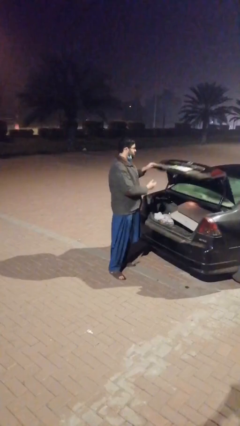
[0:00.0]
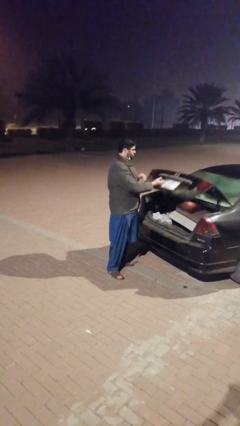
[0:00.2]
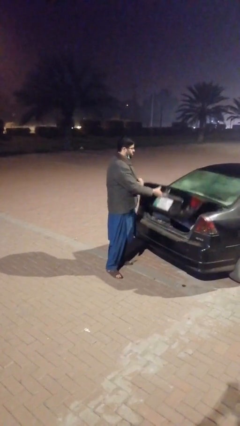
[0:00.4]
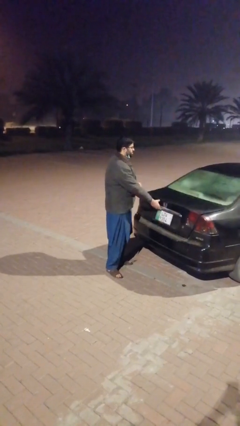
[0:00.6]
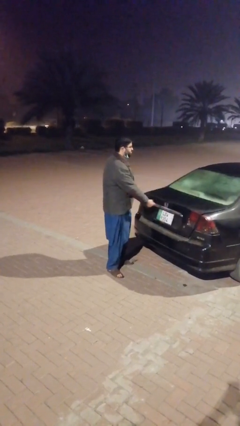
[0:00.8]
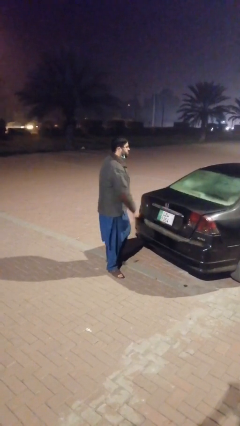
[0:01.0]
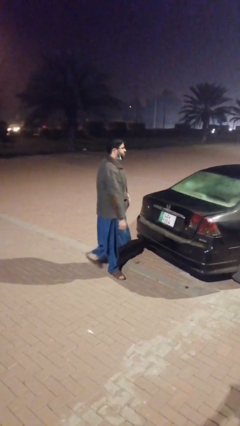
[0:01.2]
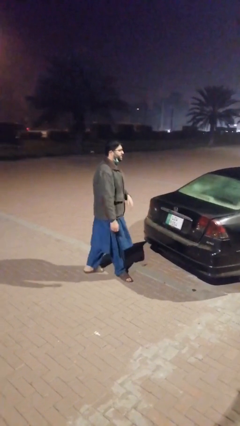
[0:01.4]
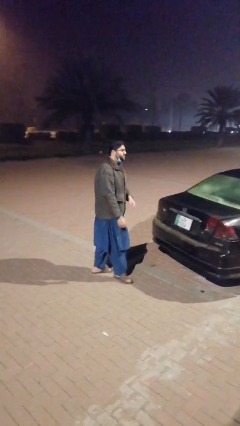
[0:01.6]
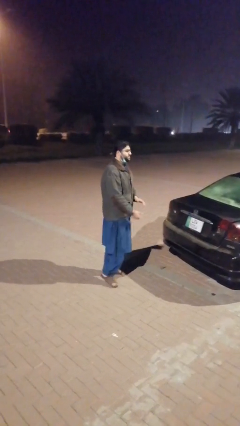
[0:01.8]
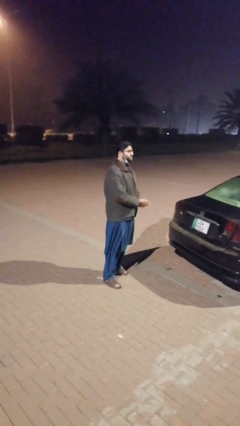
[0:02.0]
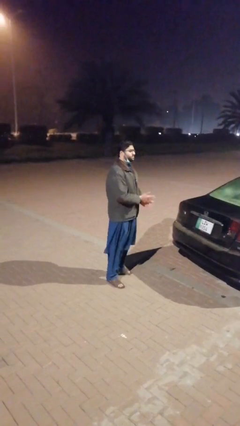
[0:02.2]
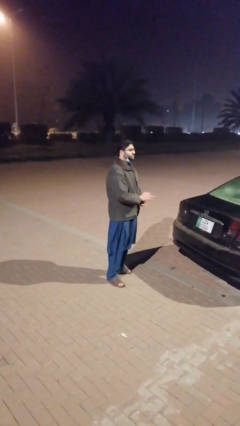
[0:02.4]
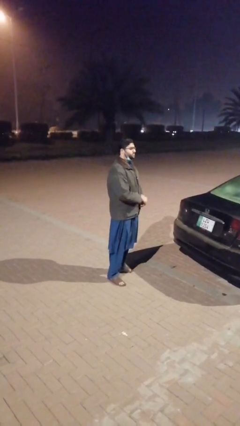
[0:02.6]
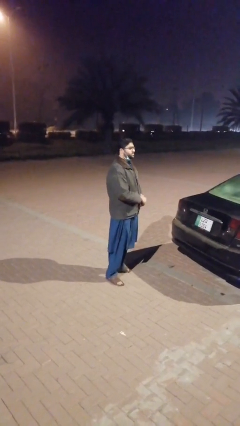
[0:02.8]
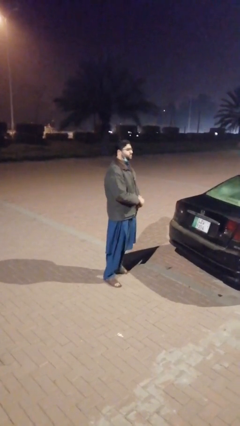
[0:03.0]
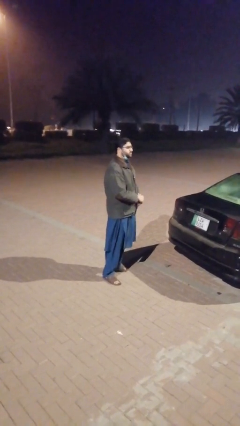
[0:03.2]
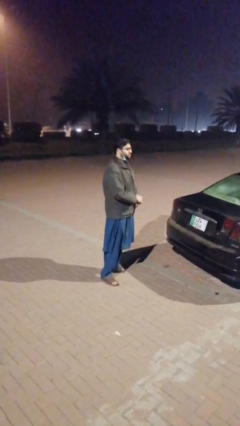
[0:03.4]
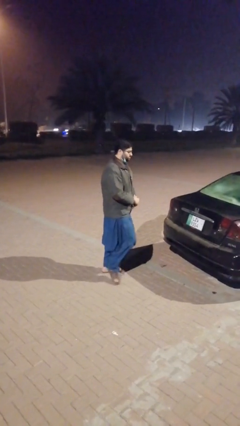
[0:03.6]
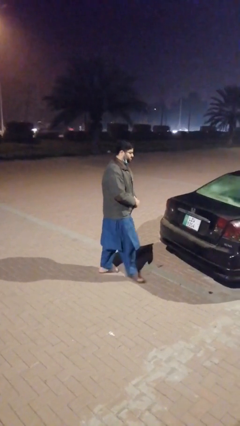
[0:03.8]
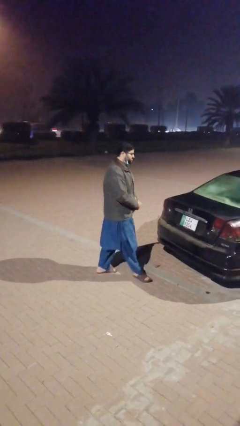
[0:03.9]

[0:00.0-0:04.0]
person closes car trunk

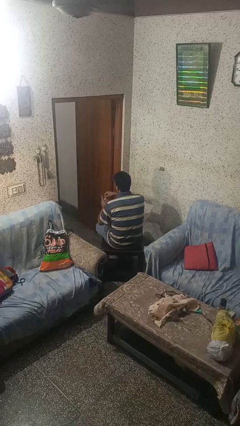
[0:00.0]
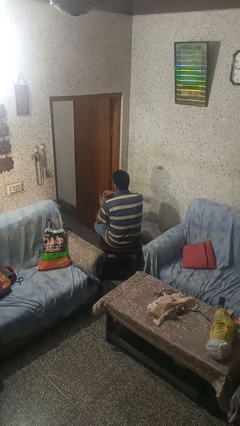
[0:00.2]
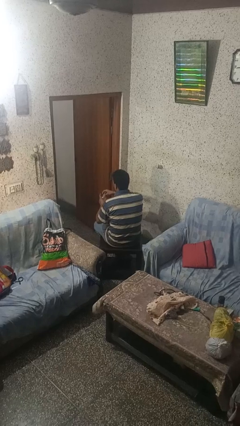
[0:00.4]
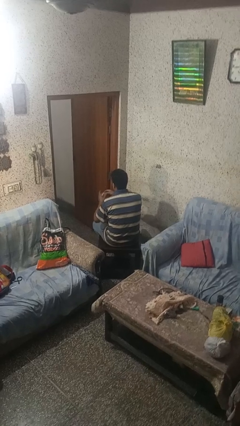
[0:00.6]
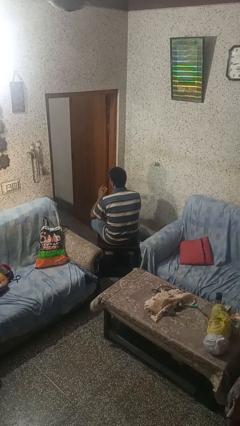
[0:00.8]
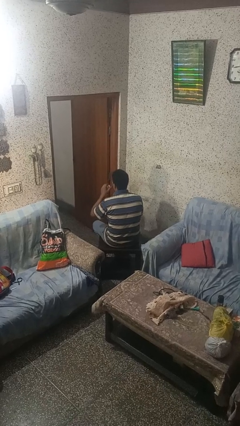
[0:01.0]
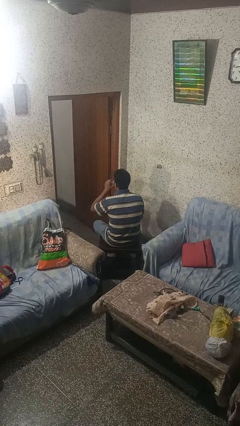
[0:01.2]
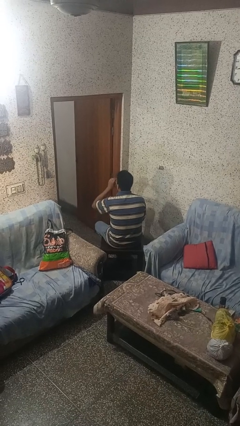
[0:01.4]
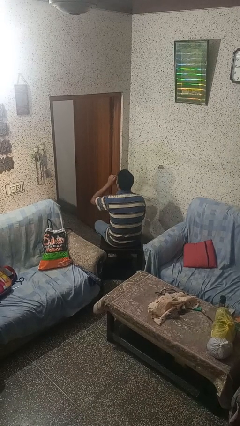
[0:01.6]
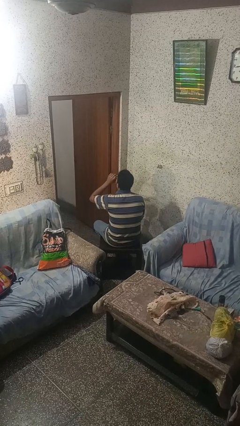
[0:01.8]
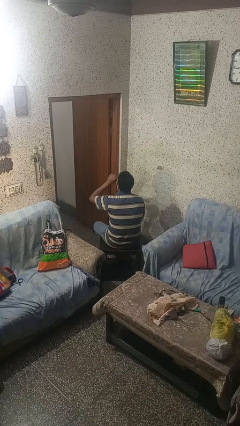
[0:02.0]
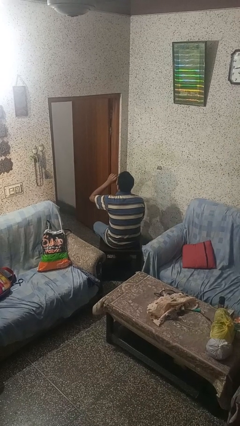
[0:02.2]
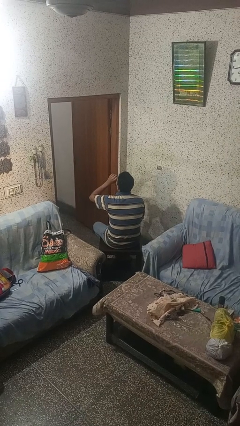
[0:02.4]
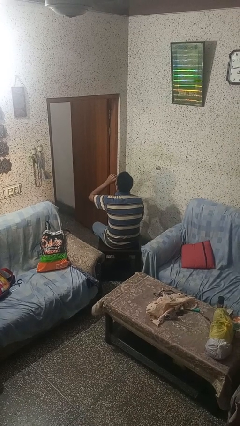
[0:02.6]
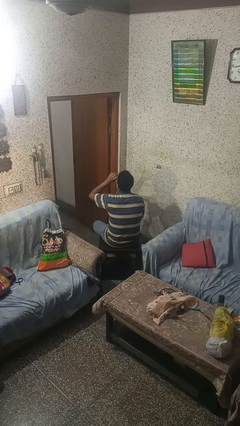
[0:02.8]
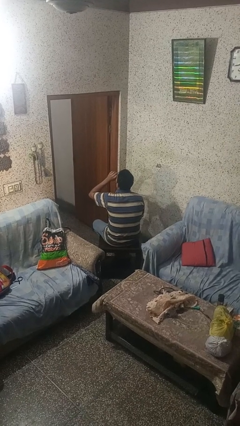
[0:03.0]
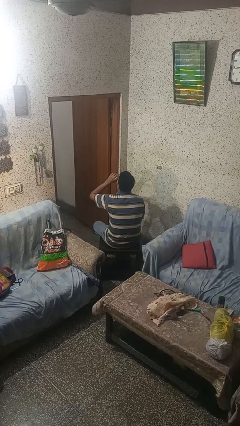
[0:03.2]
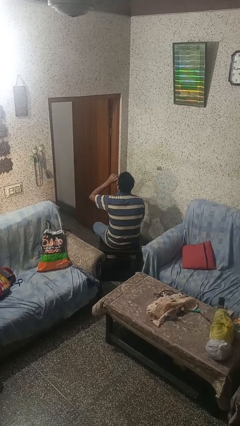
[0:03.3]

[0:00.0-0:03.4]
person drinks from beverage can

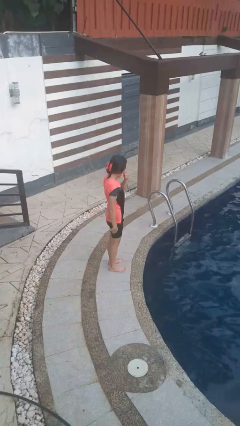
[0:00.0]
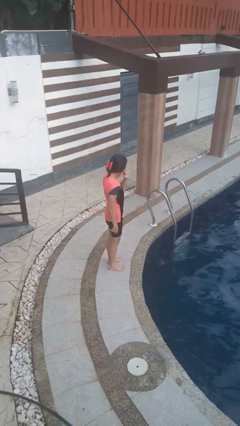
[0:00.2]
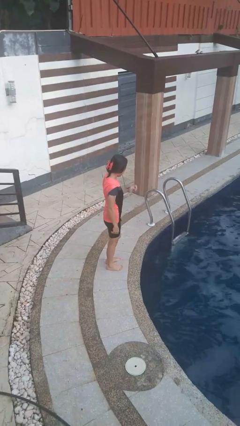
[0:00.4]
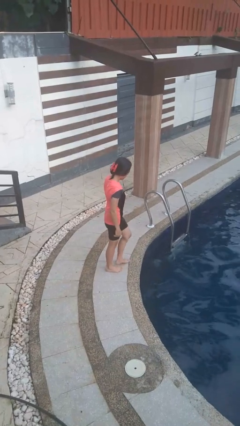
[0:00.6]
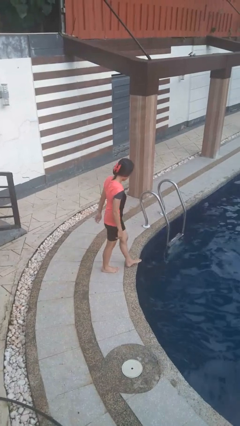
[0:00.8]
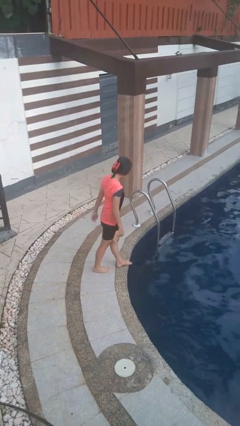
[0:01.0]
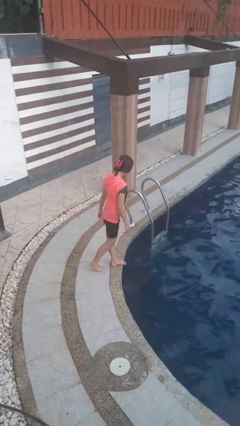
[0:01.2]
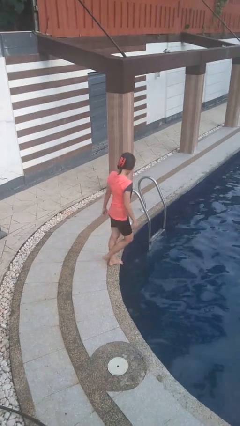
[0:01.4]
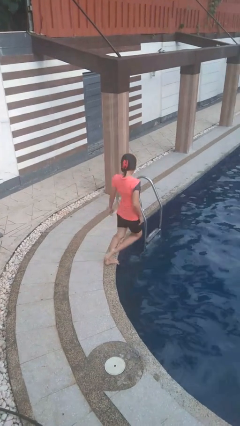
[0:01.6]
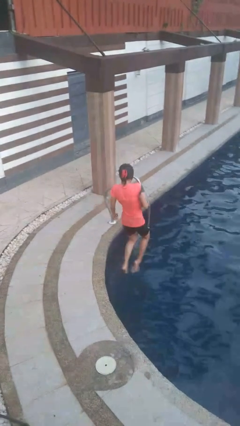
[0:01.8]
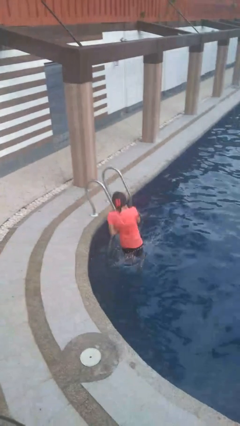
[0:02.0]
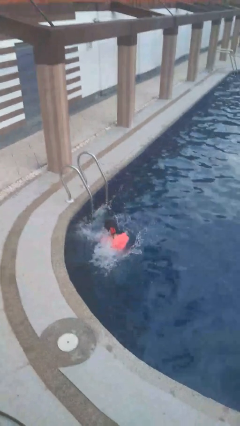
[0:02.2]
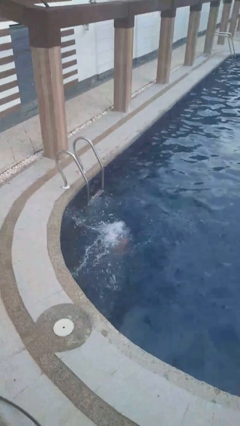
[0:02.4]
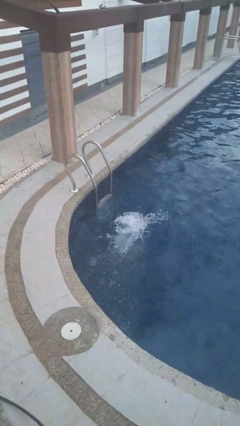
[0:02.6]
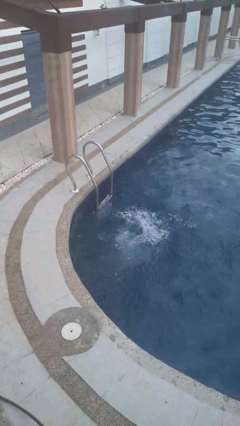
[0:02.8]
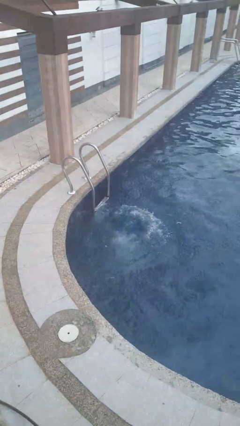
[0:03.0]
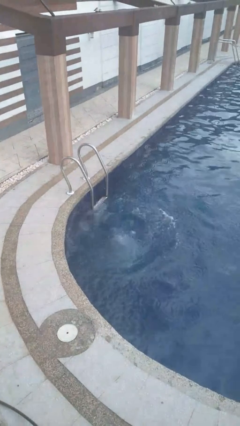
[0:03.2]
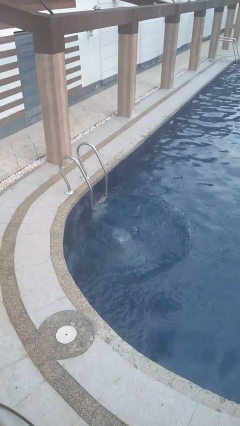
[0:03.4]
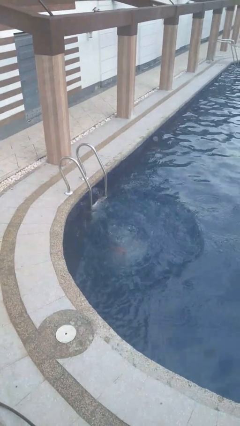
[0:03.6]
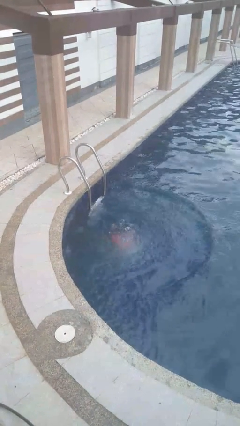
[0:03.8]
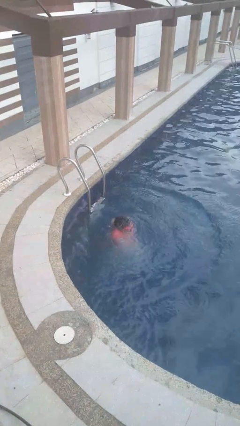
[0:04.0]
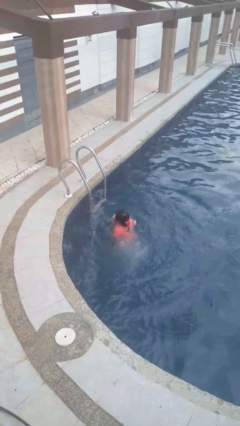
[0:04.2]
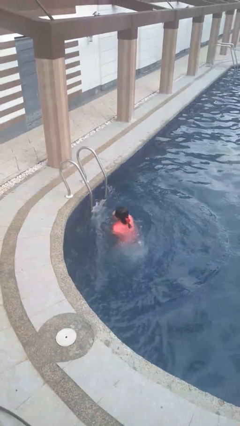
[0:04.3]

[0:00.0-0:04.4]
person falls into pool

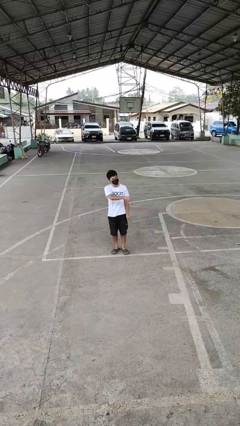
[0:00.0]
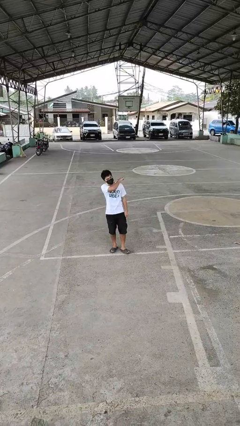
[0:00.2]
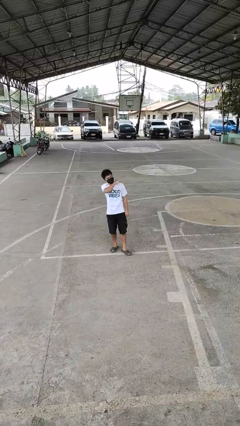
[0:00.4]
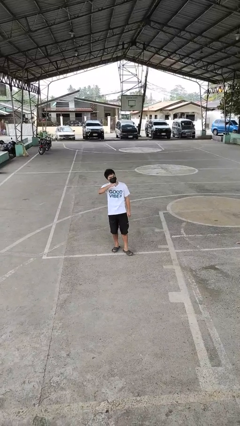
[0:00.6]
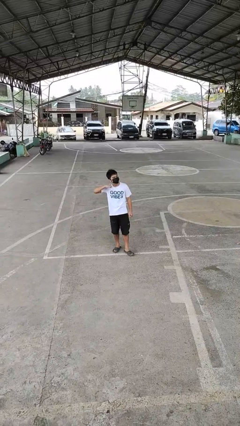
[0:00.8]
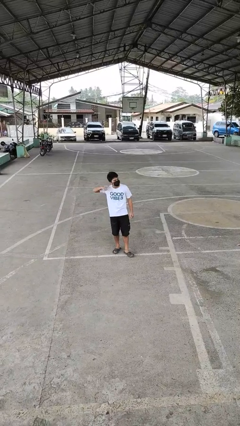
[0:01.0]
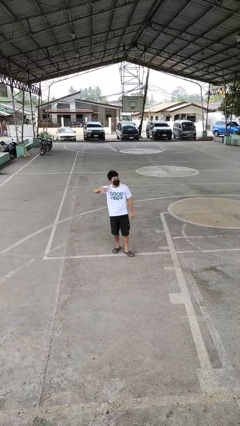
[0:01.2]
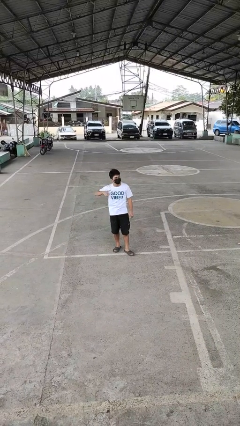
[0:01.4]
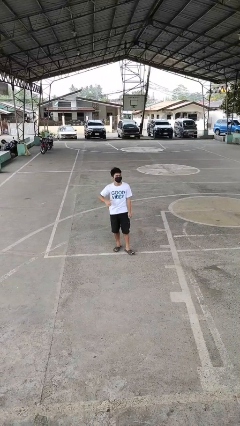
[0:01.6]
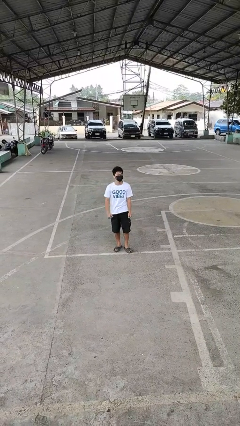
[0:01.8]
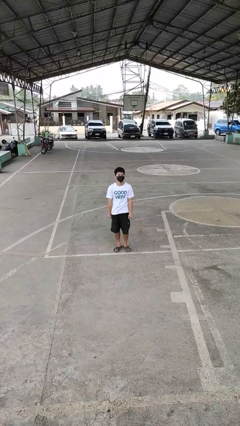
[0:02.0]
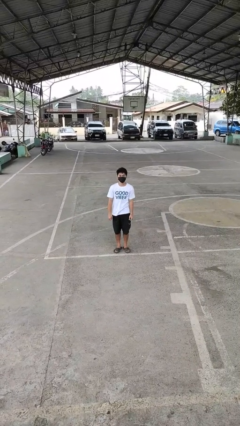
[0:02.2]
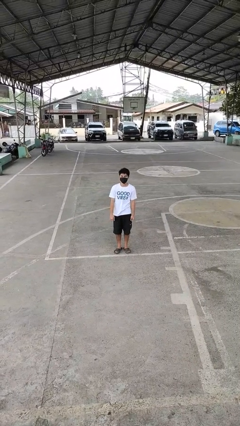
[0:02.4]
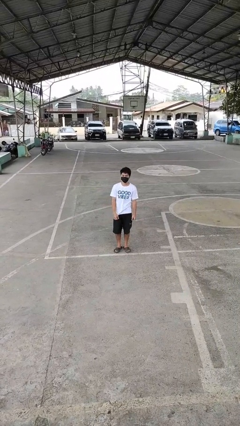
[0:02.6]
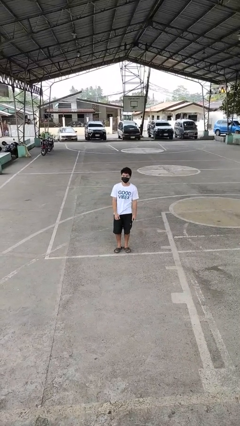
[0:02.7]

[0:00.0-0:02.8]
person gestures cut

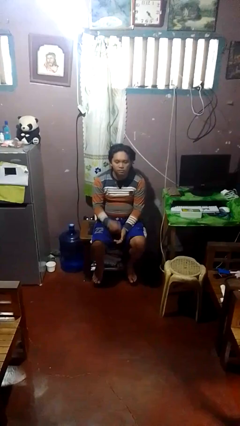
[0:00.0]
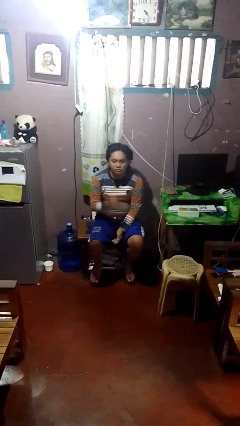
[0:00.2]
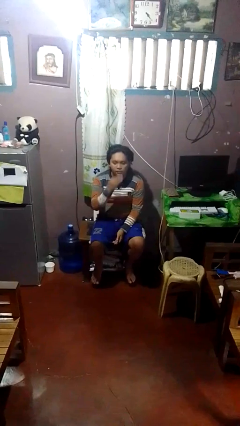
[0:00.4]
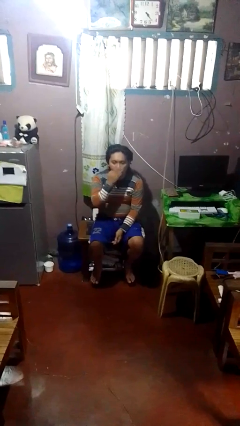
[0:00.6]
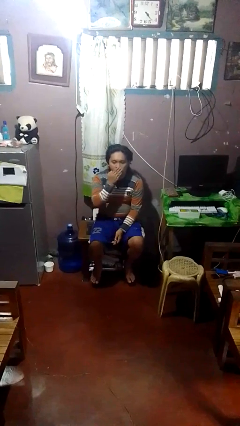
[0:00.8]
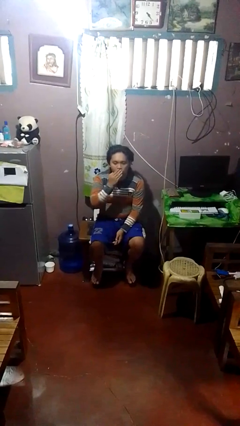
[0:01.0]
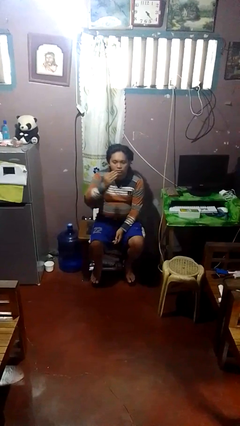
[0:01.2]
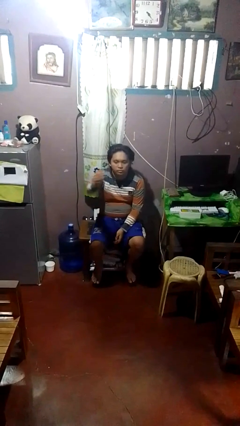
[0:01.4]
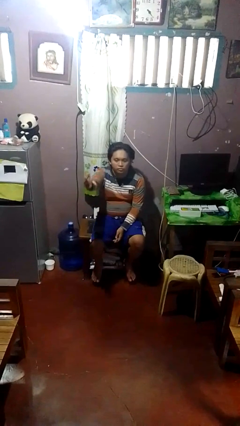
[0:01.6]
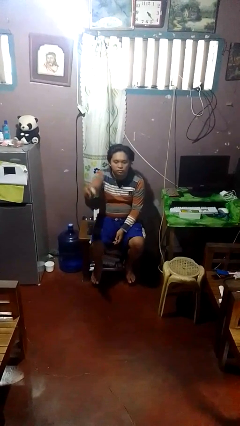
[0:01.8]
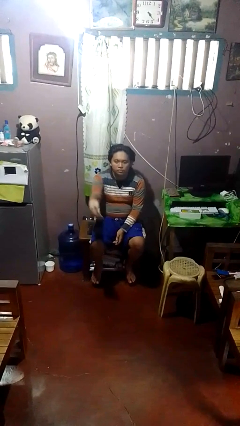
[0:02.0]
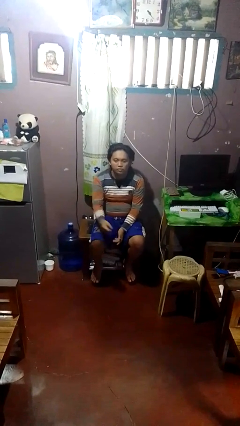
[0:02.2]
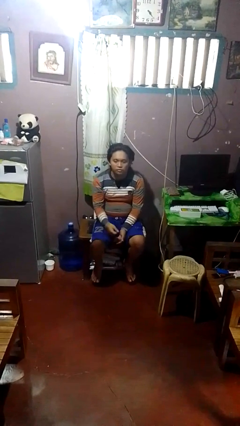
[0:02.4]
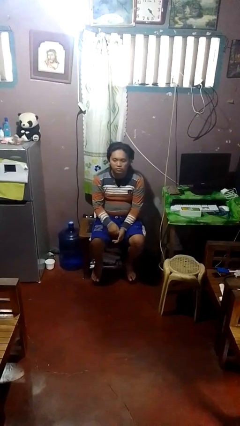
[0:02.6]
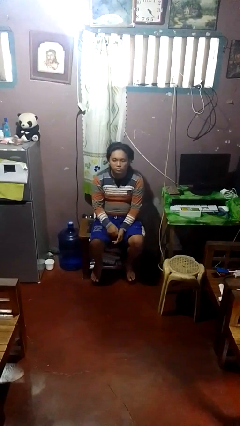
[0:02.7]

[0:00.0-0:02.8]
person gestures blow kiss

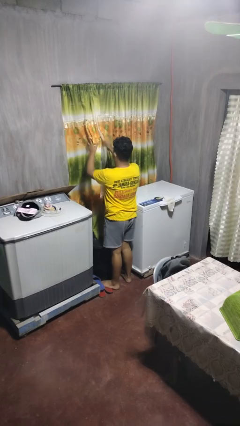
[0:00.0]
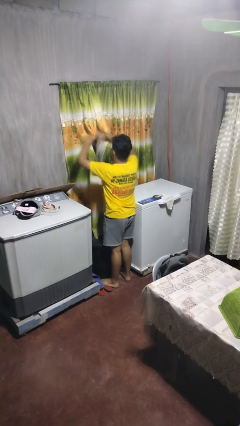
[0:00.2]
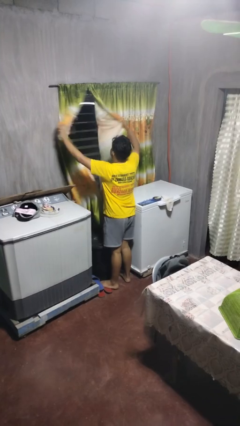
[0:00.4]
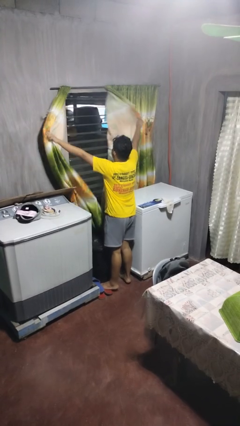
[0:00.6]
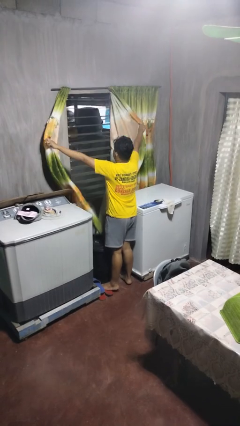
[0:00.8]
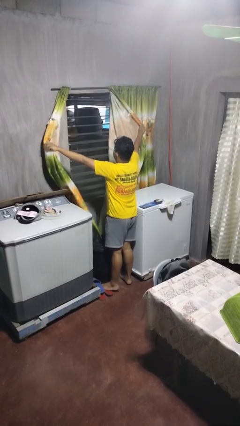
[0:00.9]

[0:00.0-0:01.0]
person opens curtains
